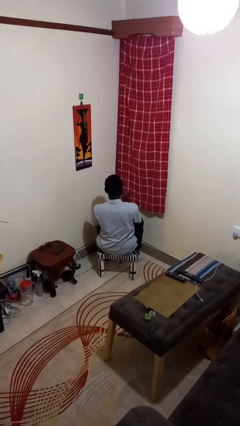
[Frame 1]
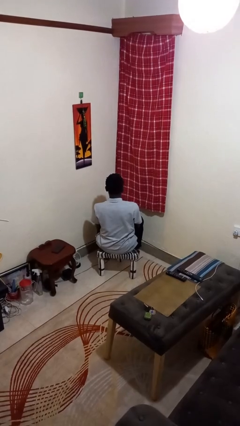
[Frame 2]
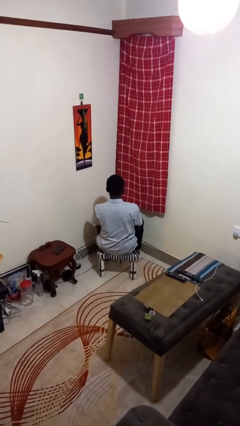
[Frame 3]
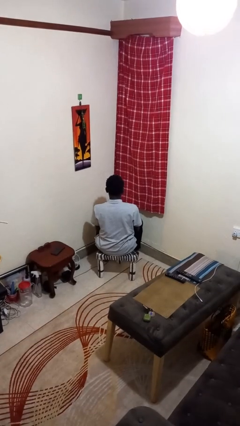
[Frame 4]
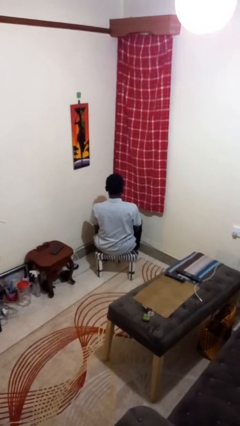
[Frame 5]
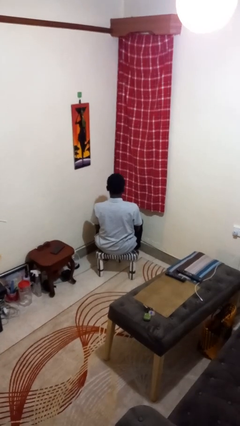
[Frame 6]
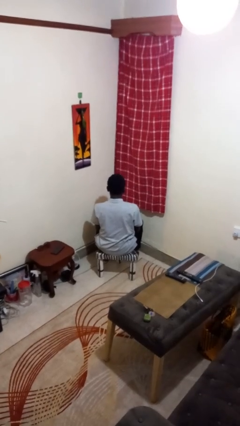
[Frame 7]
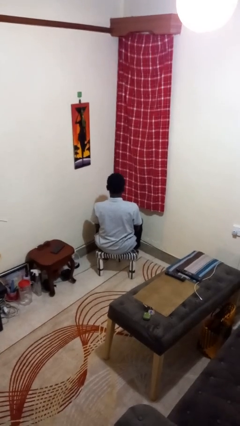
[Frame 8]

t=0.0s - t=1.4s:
person gestures lower hand

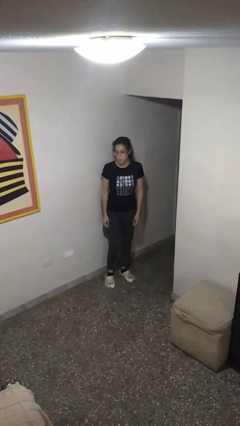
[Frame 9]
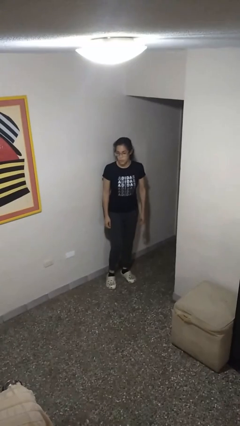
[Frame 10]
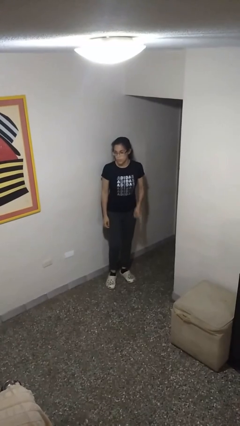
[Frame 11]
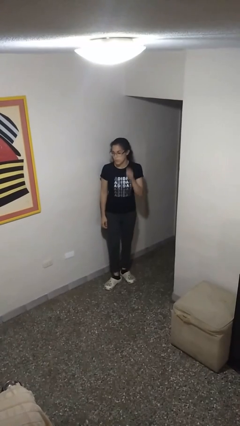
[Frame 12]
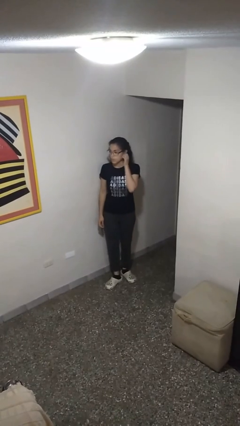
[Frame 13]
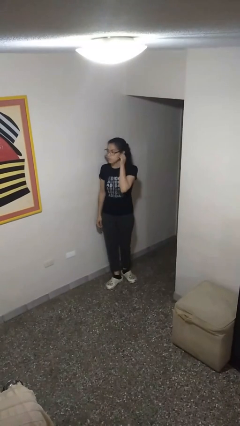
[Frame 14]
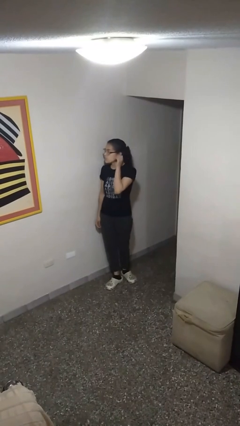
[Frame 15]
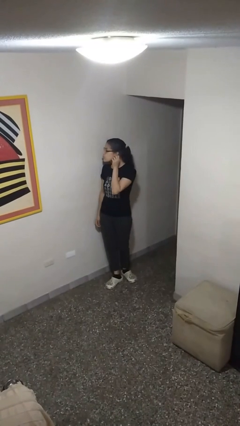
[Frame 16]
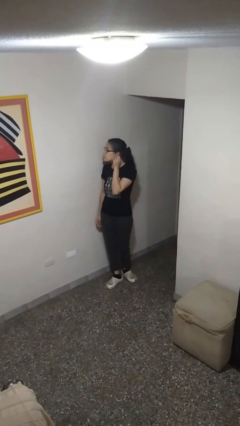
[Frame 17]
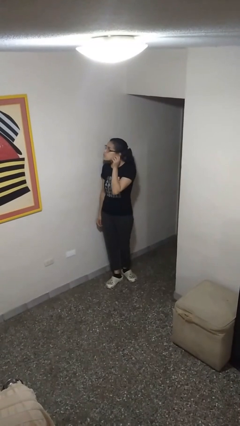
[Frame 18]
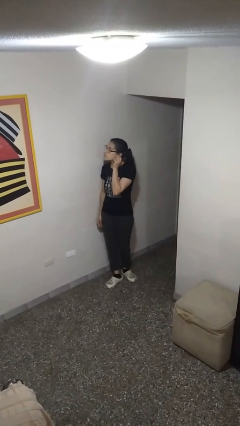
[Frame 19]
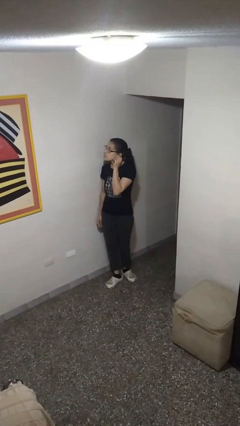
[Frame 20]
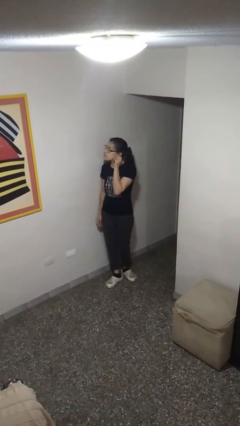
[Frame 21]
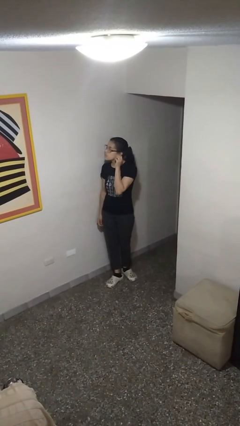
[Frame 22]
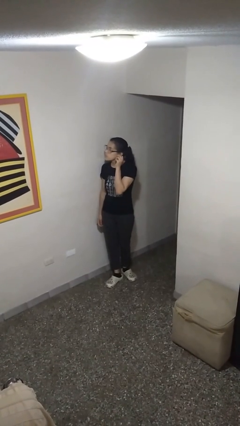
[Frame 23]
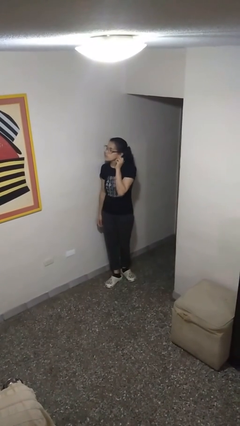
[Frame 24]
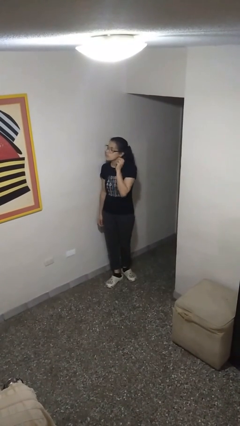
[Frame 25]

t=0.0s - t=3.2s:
person touches earlobe

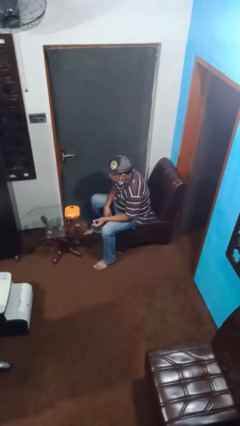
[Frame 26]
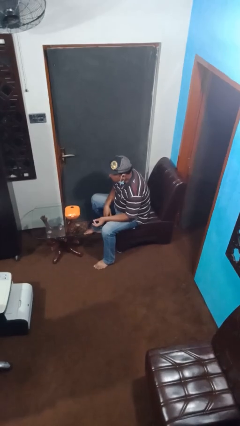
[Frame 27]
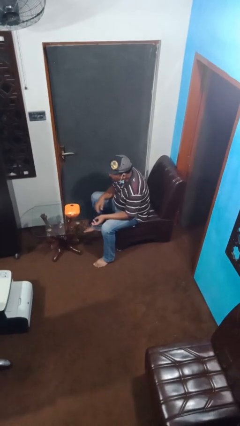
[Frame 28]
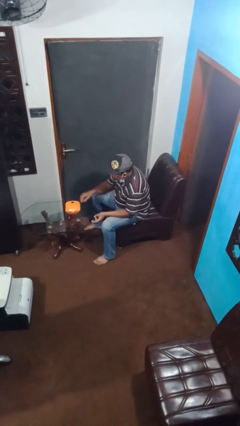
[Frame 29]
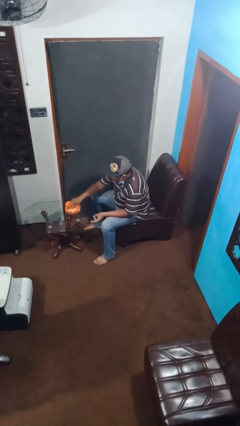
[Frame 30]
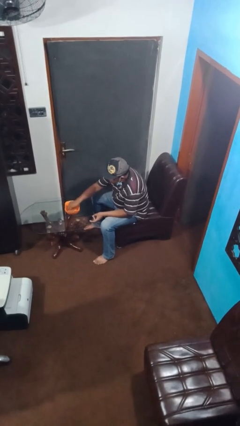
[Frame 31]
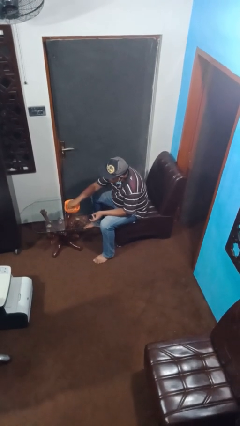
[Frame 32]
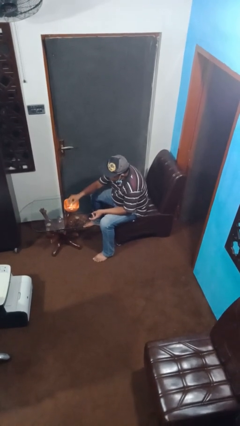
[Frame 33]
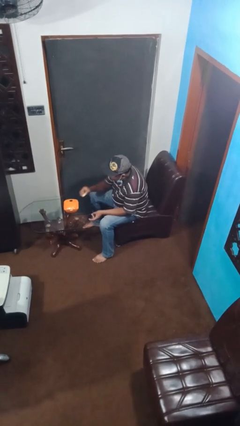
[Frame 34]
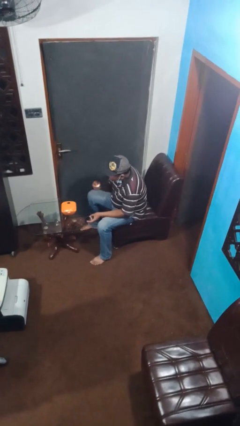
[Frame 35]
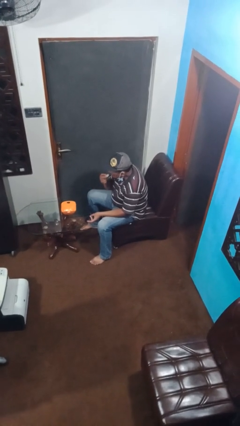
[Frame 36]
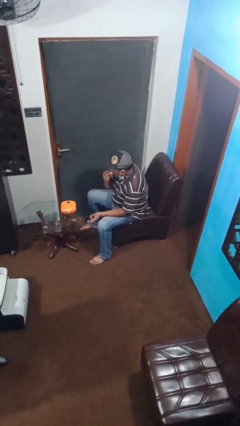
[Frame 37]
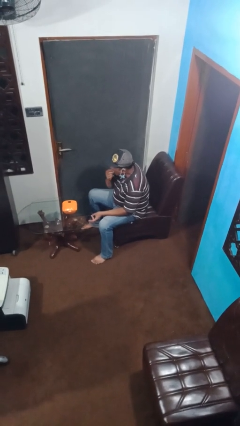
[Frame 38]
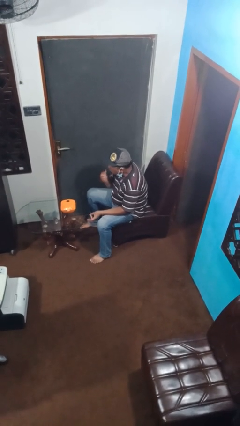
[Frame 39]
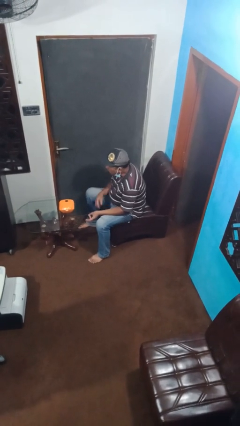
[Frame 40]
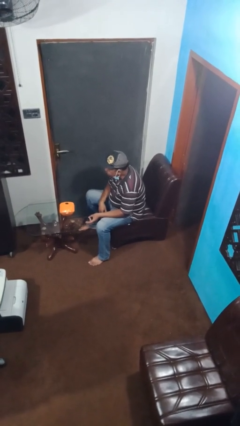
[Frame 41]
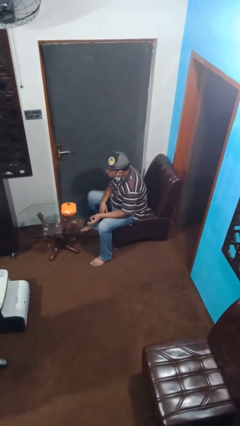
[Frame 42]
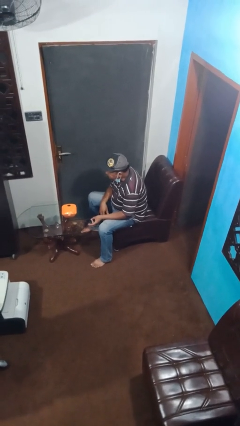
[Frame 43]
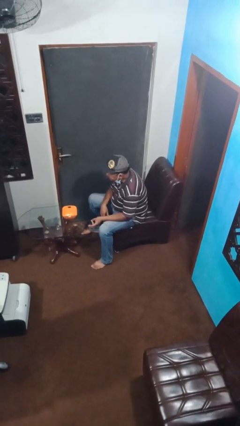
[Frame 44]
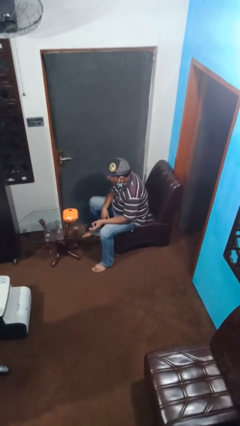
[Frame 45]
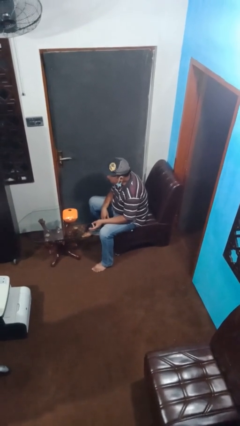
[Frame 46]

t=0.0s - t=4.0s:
person eats with hands

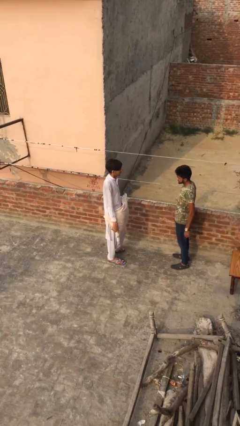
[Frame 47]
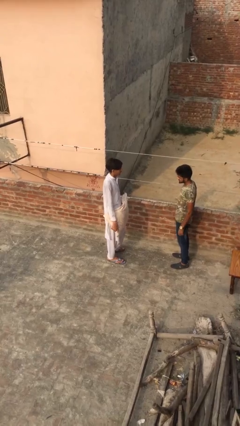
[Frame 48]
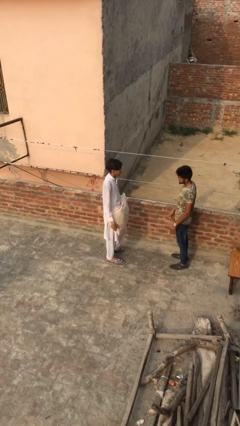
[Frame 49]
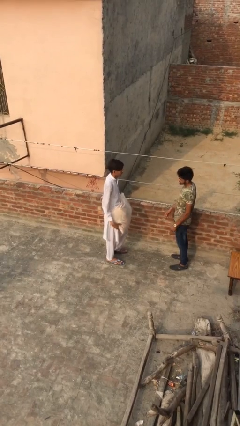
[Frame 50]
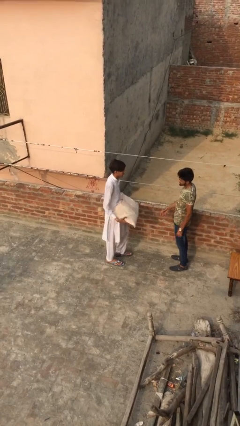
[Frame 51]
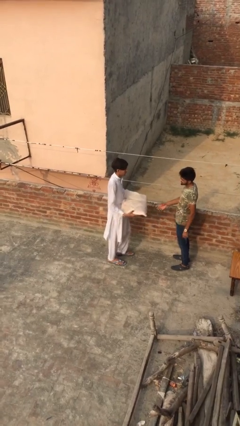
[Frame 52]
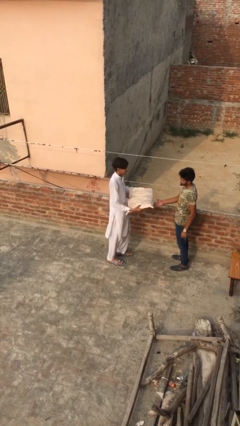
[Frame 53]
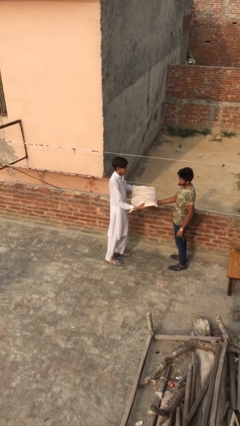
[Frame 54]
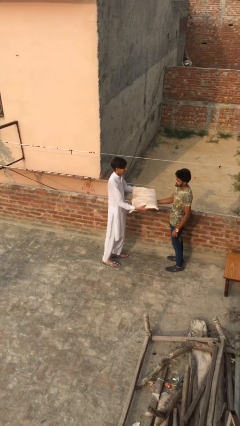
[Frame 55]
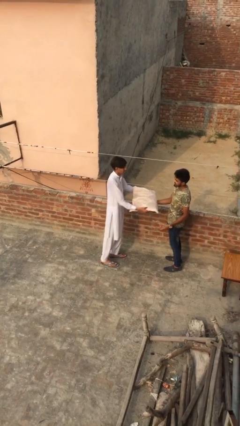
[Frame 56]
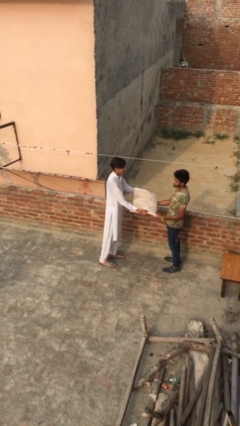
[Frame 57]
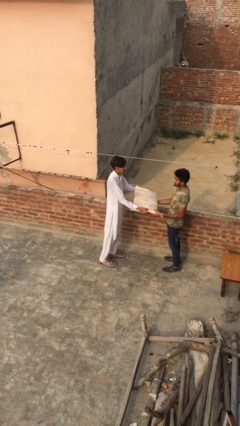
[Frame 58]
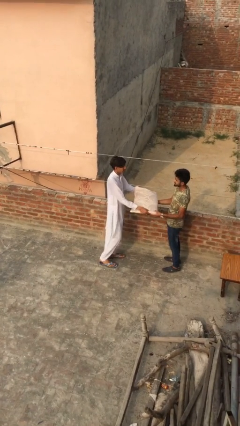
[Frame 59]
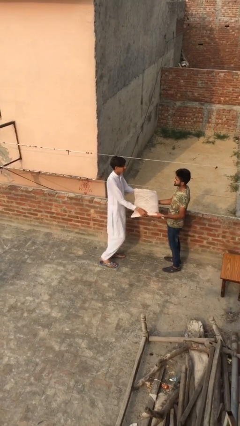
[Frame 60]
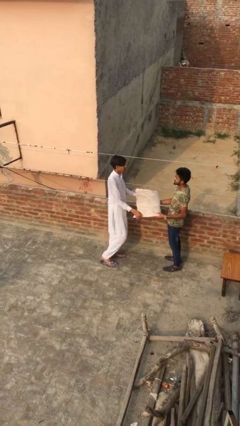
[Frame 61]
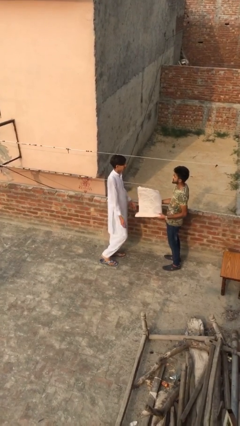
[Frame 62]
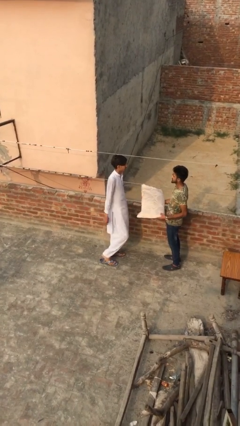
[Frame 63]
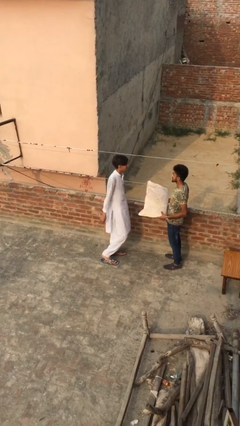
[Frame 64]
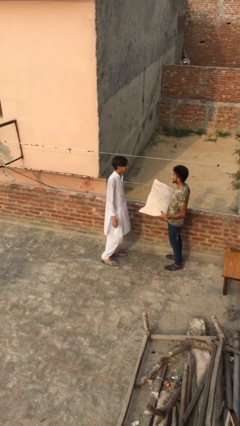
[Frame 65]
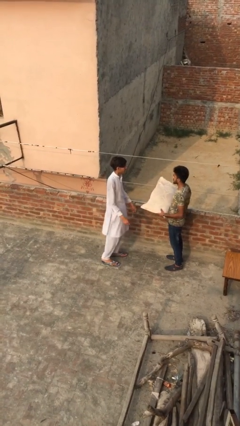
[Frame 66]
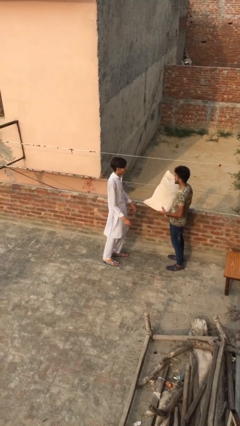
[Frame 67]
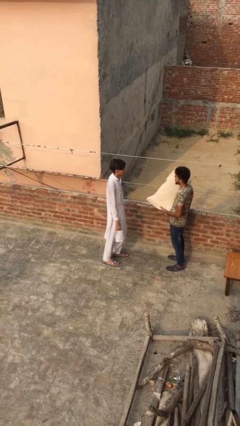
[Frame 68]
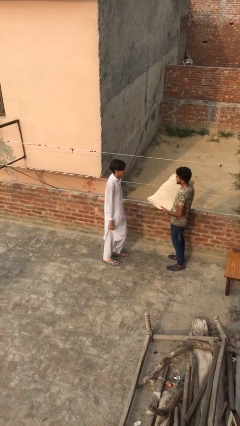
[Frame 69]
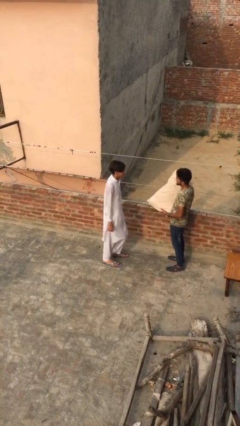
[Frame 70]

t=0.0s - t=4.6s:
person transfers object to person

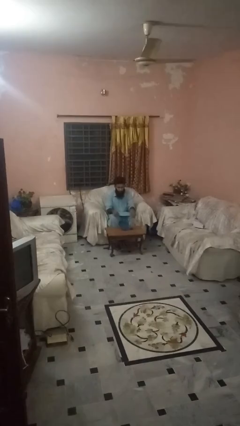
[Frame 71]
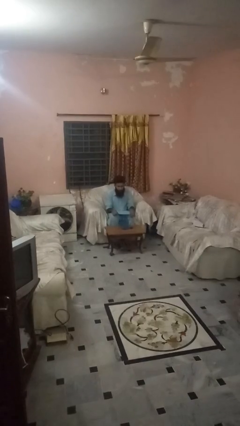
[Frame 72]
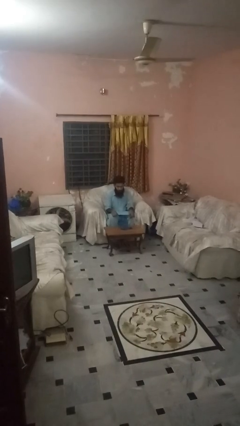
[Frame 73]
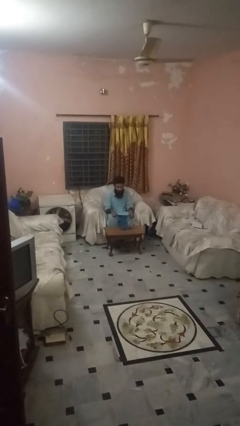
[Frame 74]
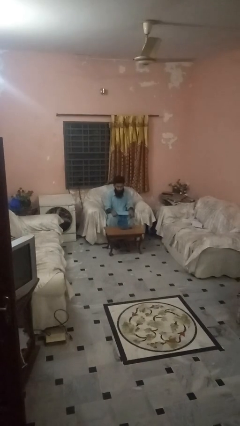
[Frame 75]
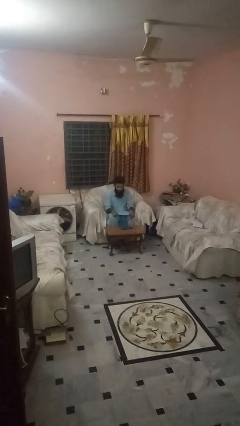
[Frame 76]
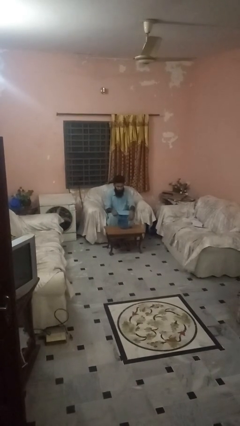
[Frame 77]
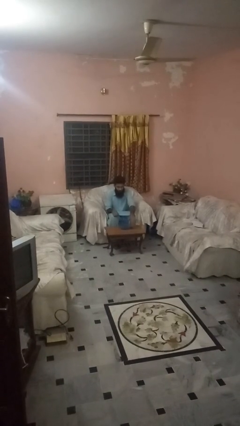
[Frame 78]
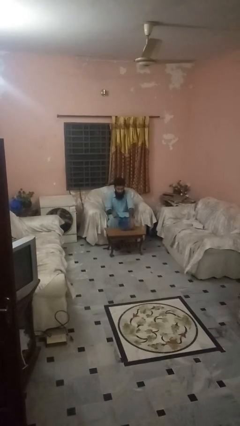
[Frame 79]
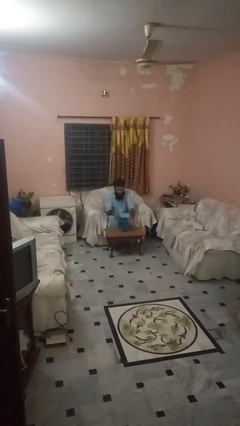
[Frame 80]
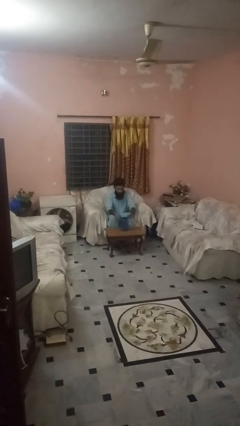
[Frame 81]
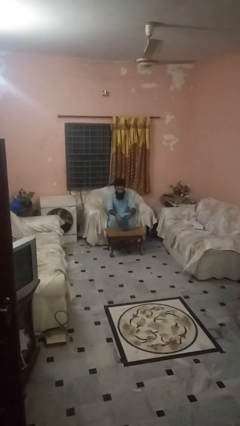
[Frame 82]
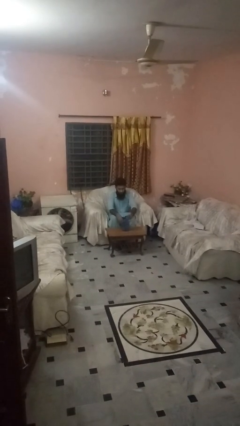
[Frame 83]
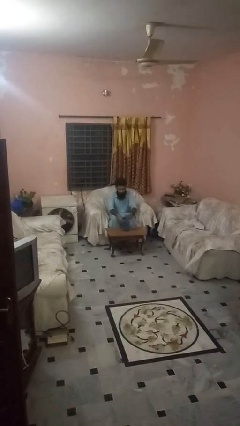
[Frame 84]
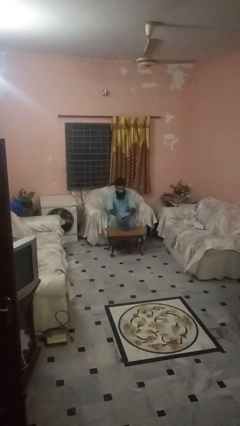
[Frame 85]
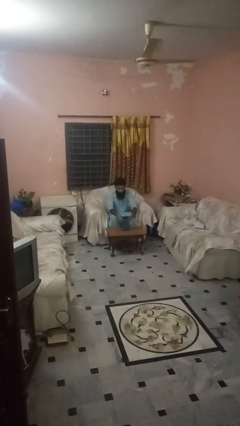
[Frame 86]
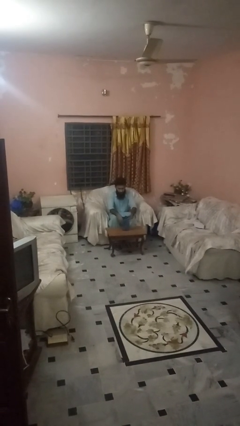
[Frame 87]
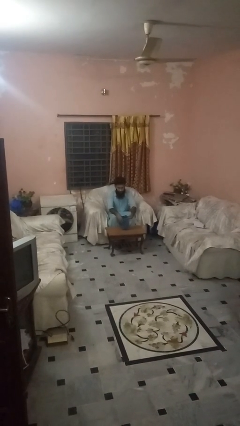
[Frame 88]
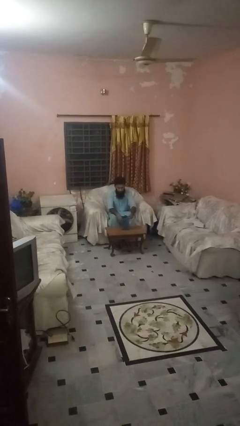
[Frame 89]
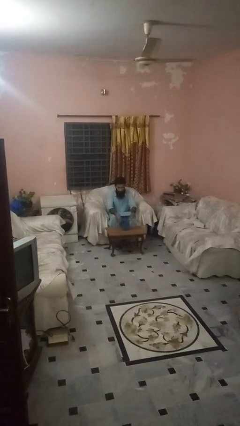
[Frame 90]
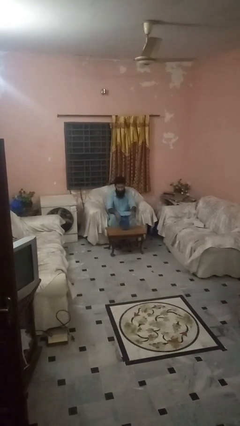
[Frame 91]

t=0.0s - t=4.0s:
person screws lid to bottle
